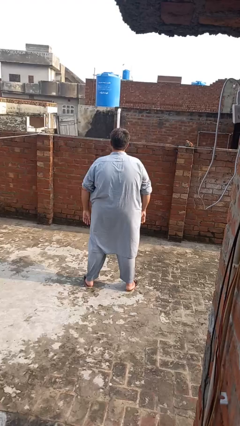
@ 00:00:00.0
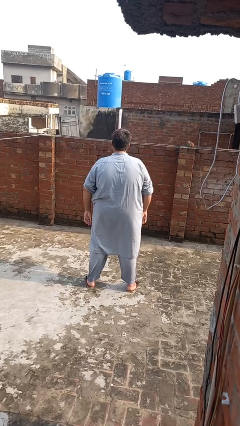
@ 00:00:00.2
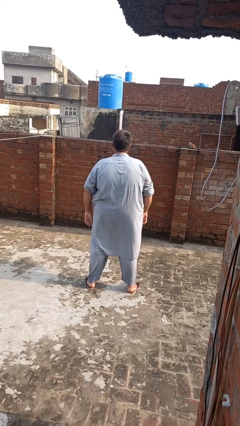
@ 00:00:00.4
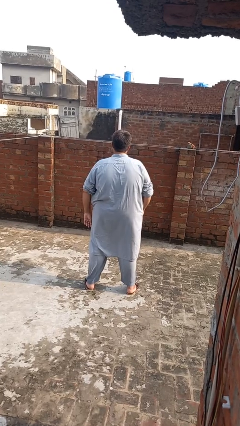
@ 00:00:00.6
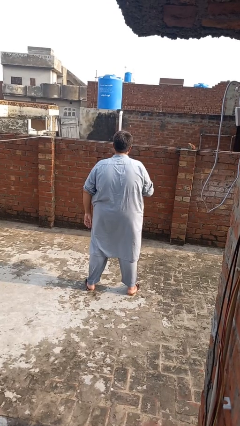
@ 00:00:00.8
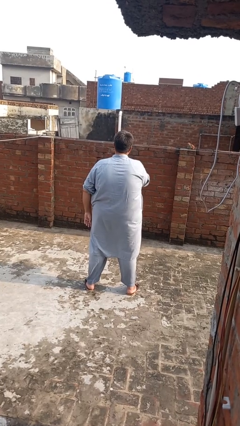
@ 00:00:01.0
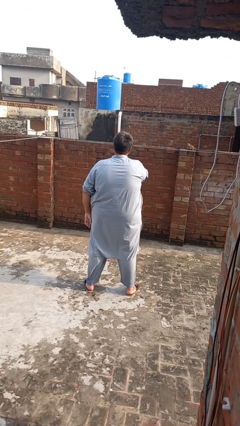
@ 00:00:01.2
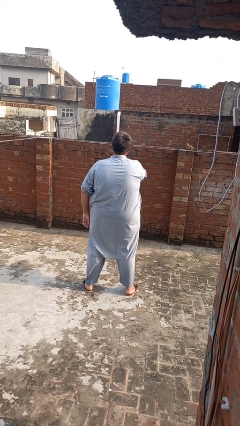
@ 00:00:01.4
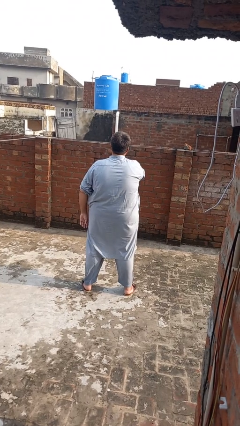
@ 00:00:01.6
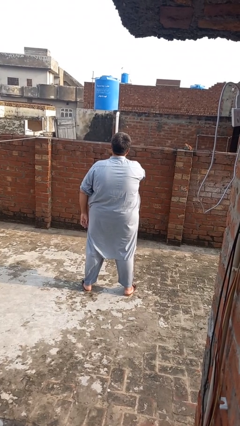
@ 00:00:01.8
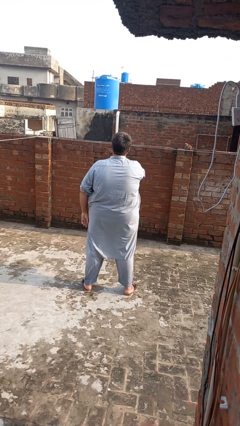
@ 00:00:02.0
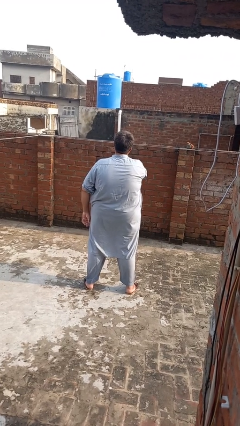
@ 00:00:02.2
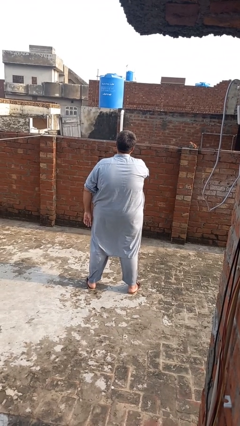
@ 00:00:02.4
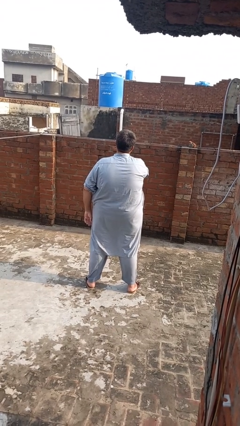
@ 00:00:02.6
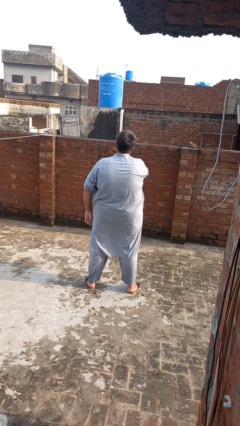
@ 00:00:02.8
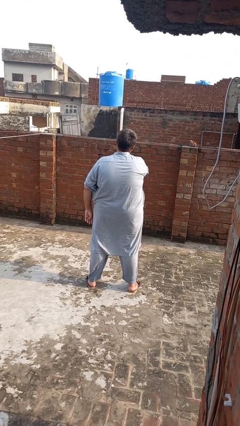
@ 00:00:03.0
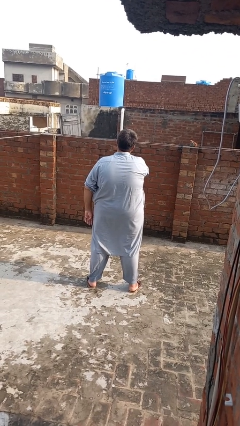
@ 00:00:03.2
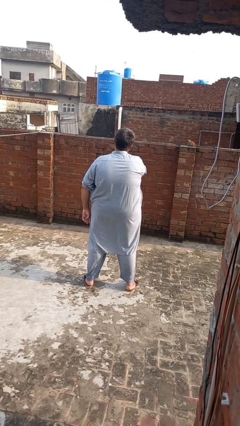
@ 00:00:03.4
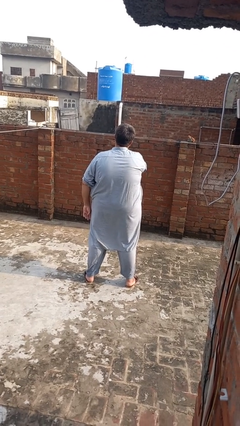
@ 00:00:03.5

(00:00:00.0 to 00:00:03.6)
person gestures be quiet

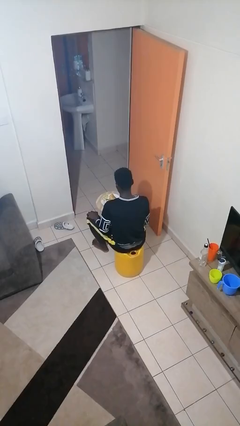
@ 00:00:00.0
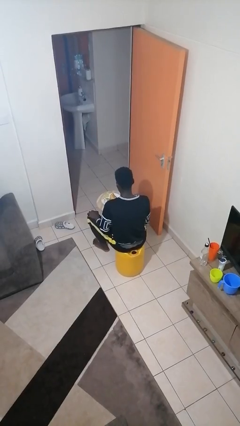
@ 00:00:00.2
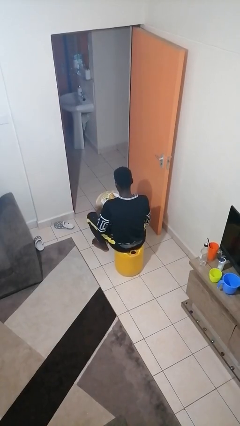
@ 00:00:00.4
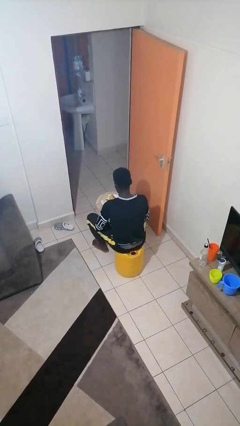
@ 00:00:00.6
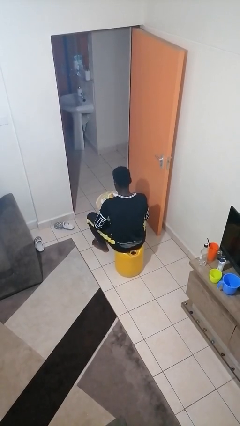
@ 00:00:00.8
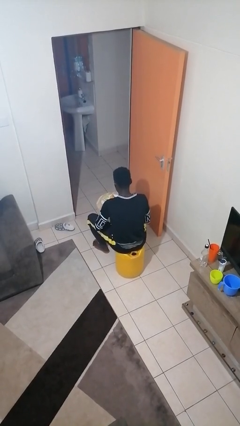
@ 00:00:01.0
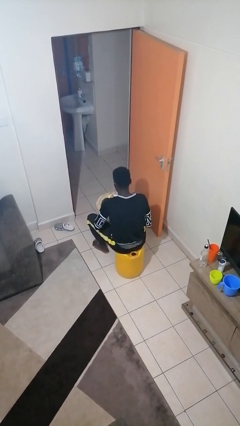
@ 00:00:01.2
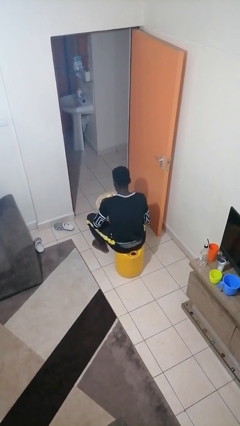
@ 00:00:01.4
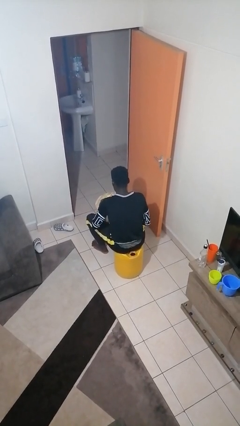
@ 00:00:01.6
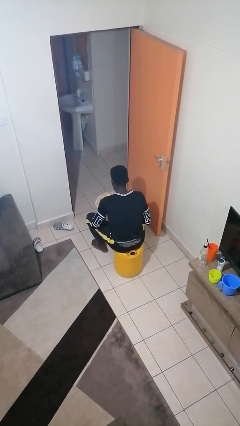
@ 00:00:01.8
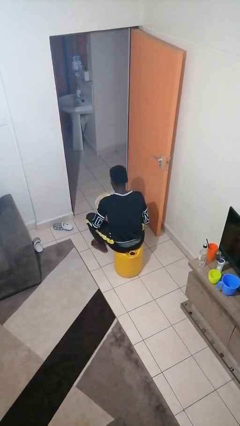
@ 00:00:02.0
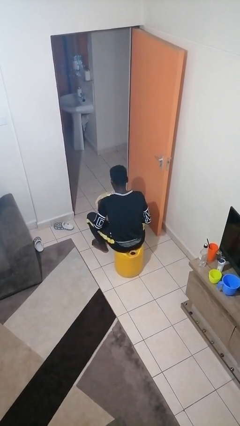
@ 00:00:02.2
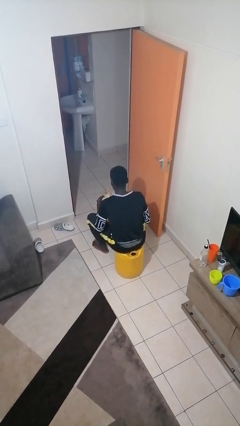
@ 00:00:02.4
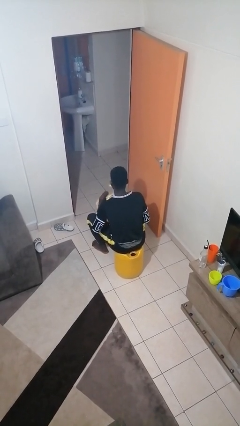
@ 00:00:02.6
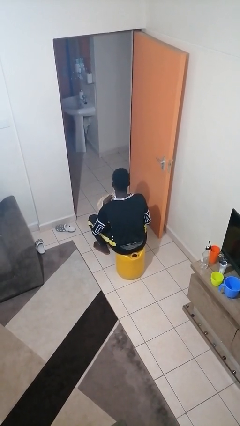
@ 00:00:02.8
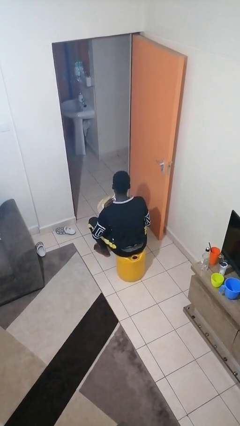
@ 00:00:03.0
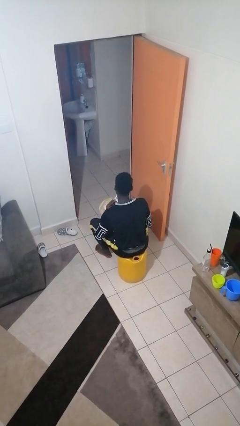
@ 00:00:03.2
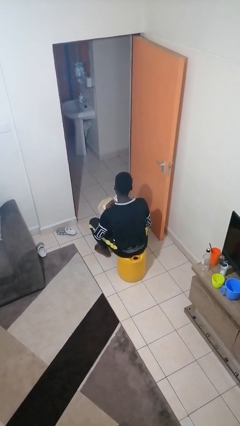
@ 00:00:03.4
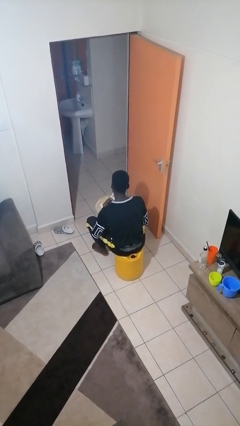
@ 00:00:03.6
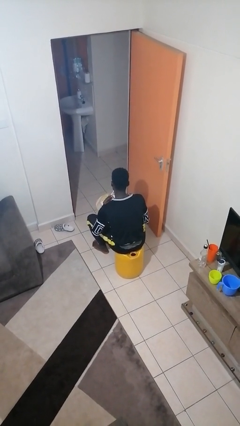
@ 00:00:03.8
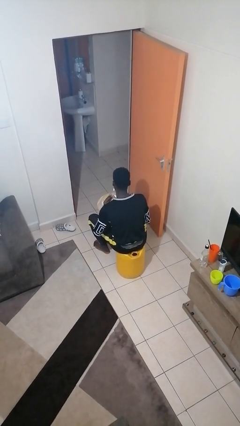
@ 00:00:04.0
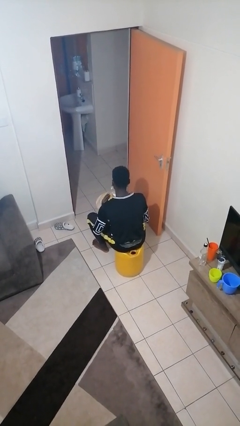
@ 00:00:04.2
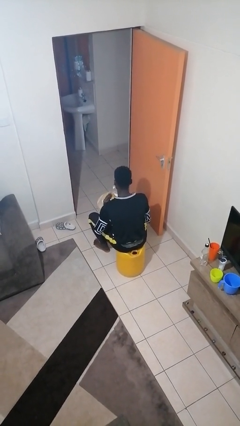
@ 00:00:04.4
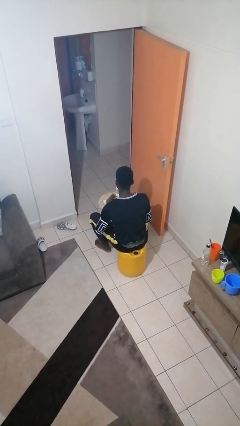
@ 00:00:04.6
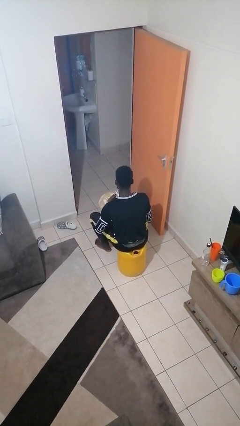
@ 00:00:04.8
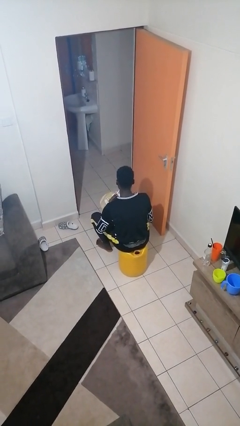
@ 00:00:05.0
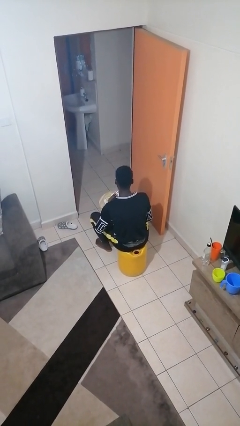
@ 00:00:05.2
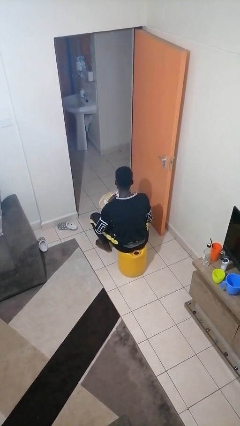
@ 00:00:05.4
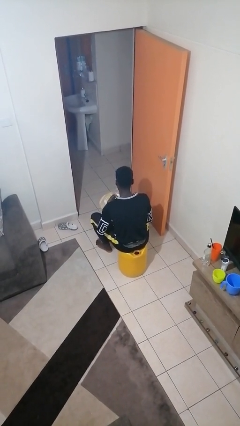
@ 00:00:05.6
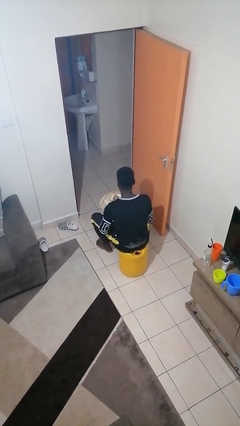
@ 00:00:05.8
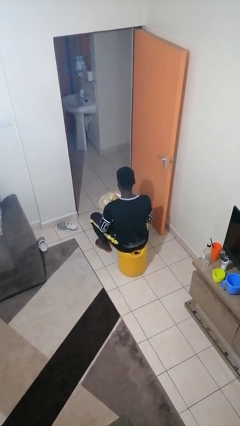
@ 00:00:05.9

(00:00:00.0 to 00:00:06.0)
person eats with utensil

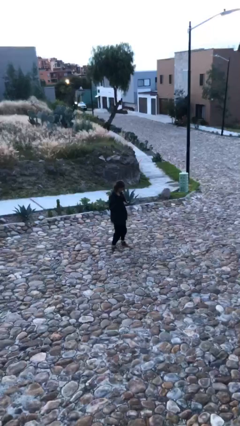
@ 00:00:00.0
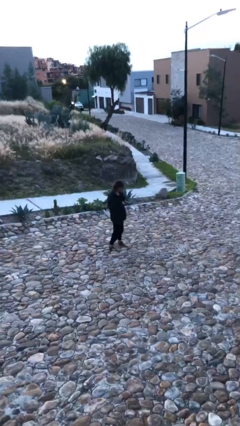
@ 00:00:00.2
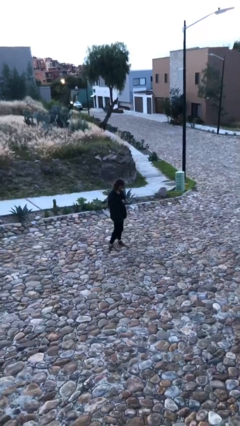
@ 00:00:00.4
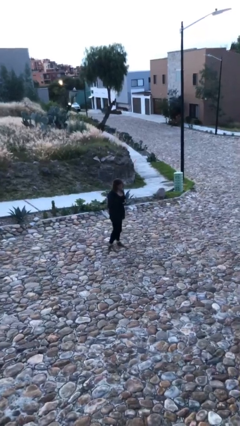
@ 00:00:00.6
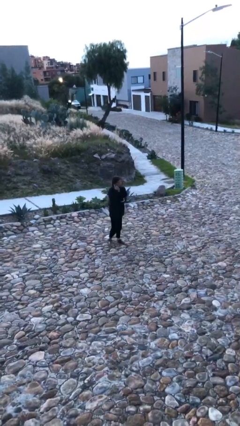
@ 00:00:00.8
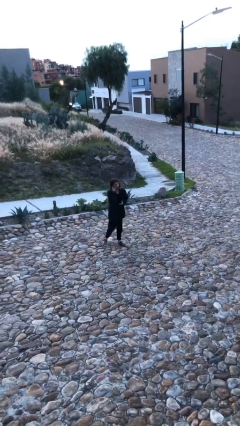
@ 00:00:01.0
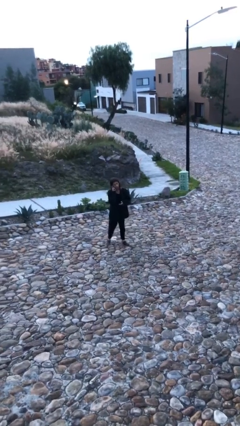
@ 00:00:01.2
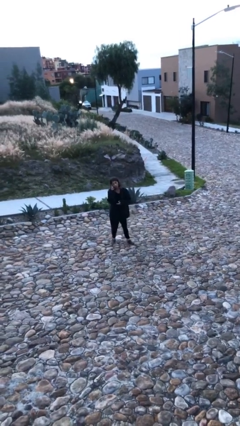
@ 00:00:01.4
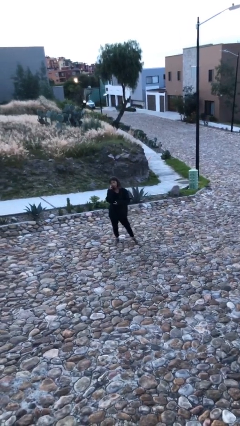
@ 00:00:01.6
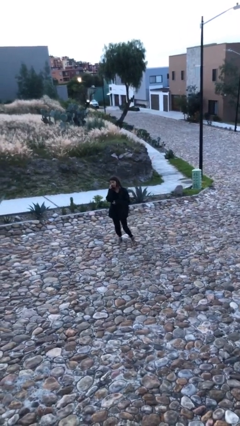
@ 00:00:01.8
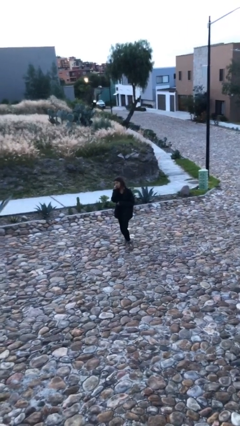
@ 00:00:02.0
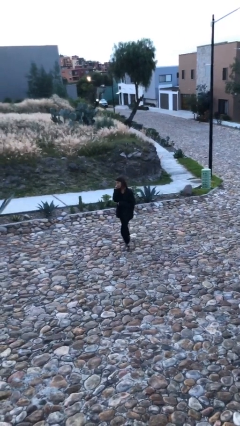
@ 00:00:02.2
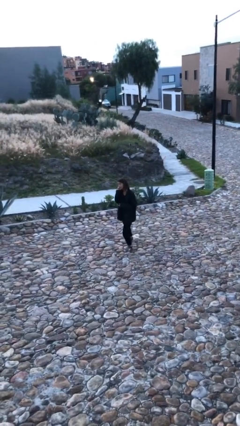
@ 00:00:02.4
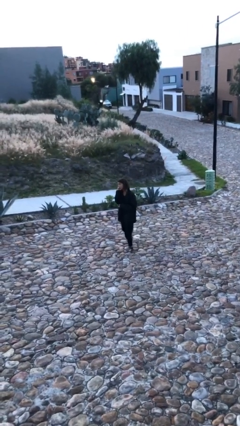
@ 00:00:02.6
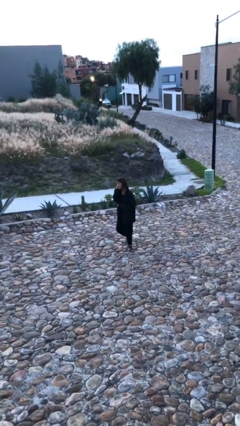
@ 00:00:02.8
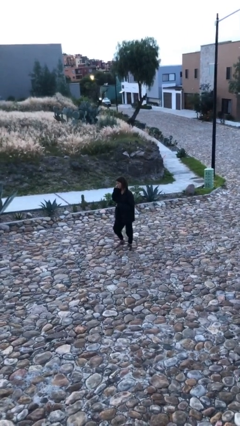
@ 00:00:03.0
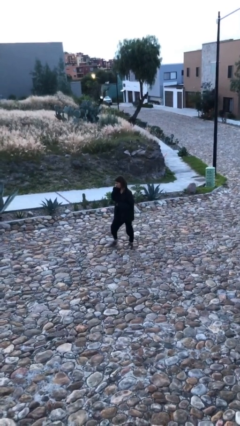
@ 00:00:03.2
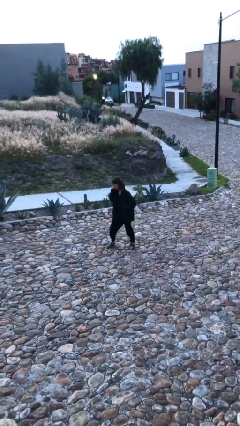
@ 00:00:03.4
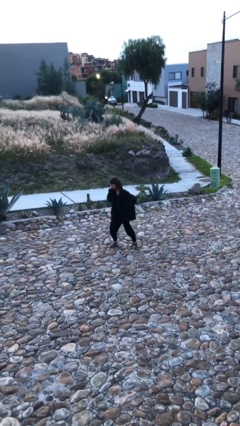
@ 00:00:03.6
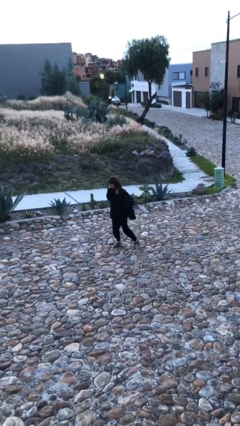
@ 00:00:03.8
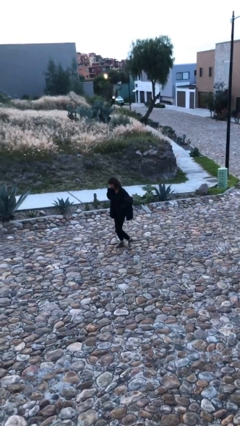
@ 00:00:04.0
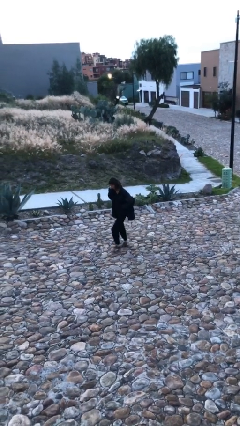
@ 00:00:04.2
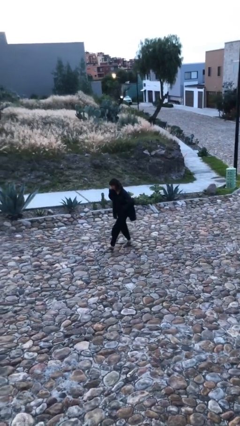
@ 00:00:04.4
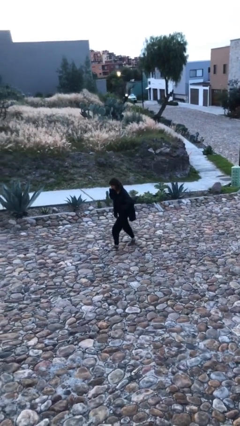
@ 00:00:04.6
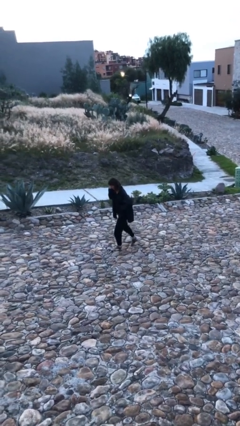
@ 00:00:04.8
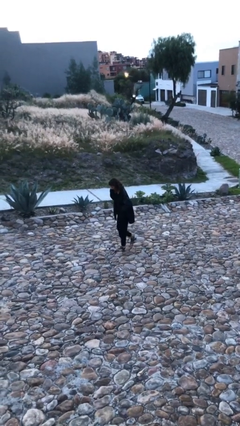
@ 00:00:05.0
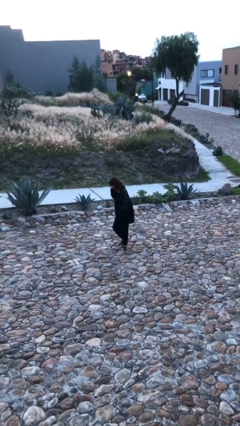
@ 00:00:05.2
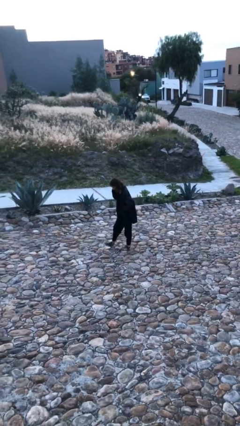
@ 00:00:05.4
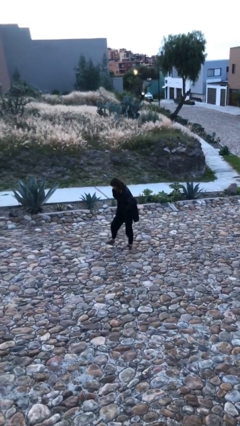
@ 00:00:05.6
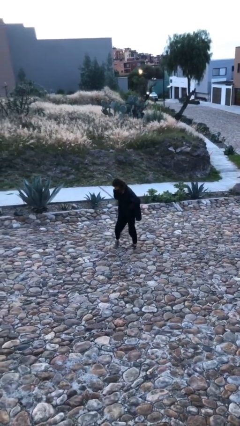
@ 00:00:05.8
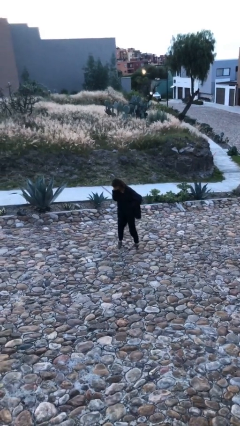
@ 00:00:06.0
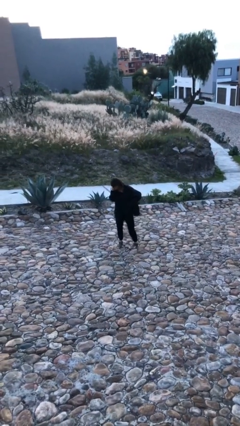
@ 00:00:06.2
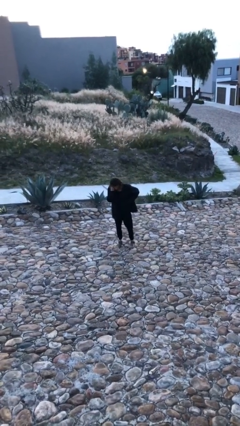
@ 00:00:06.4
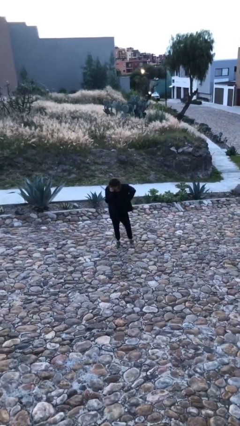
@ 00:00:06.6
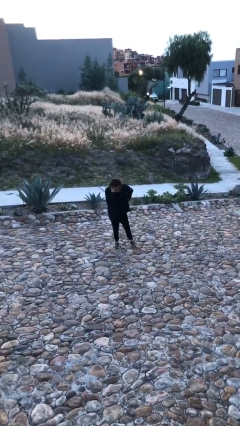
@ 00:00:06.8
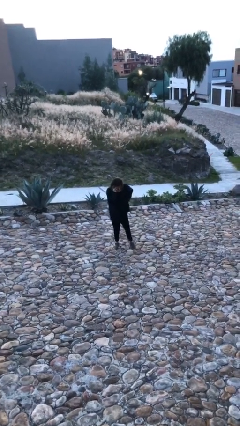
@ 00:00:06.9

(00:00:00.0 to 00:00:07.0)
person talks on phone

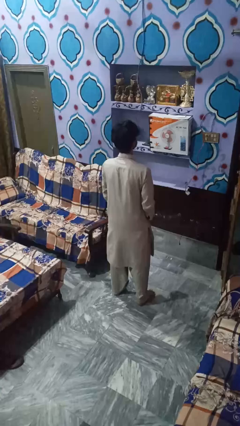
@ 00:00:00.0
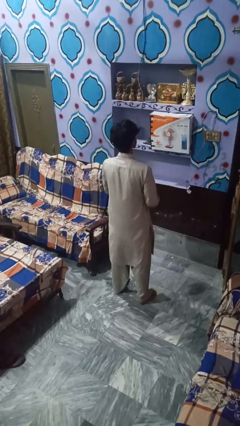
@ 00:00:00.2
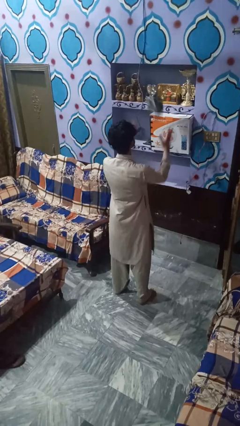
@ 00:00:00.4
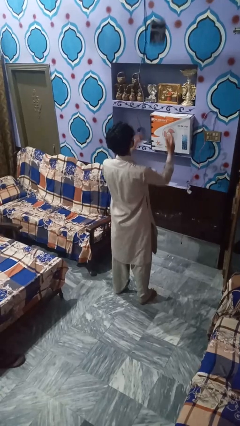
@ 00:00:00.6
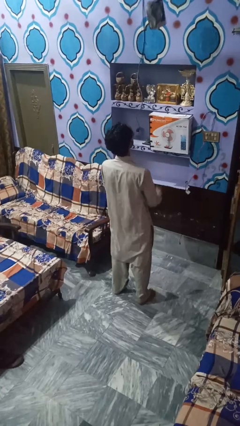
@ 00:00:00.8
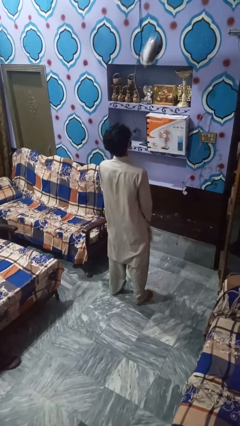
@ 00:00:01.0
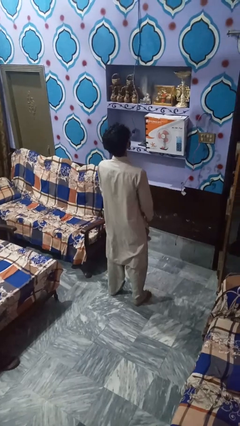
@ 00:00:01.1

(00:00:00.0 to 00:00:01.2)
person drops object
